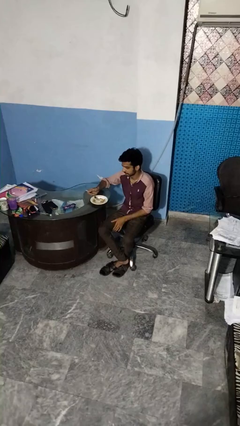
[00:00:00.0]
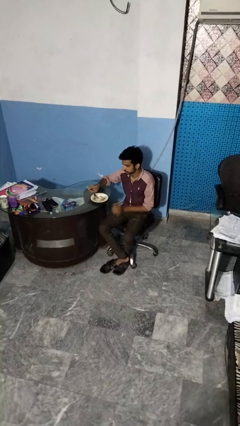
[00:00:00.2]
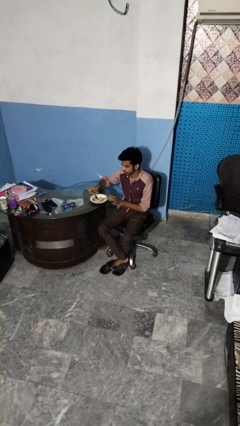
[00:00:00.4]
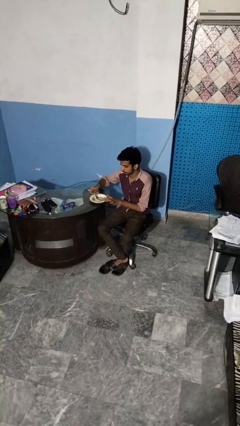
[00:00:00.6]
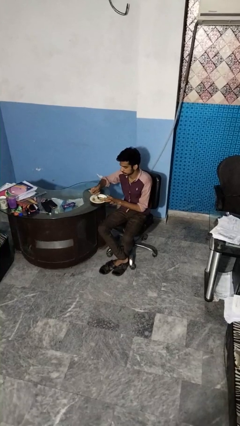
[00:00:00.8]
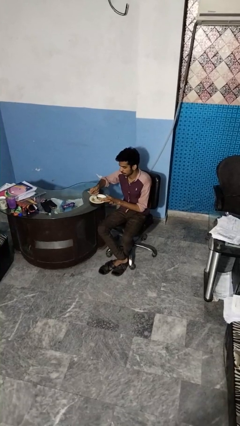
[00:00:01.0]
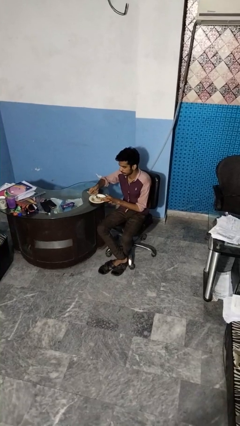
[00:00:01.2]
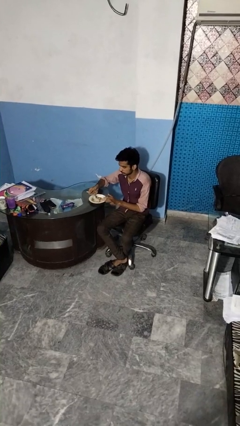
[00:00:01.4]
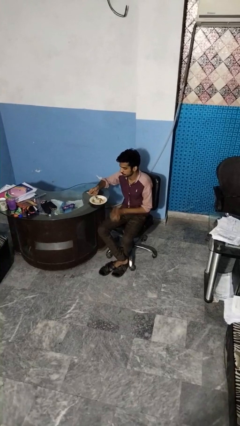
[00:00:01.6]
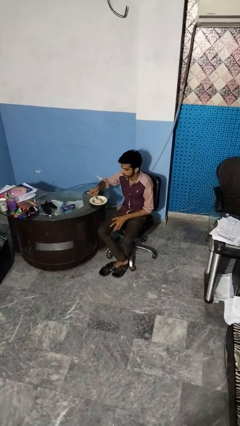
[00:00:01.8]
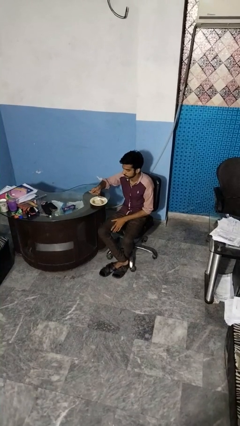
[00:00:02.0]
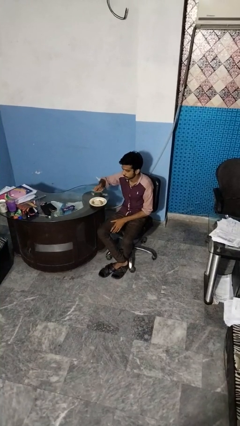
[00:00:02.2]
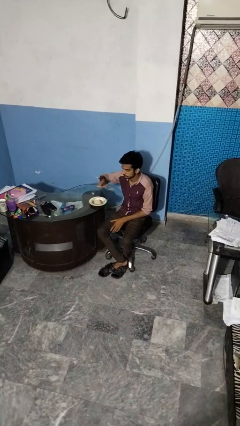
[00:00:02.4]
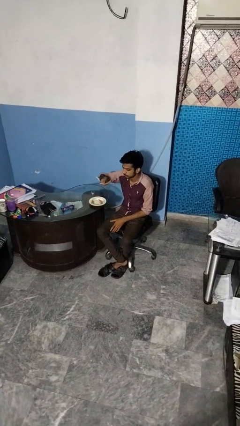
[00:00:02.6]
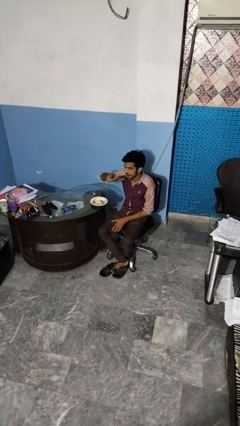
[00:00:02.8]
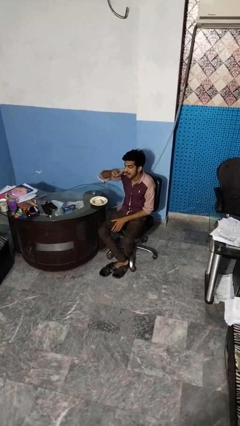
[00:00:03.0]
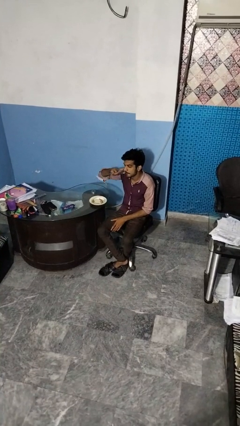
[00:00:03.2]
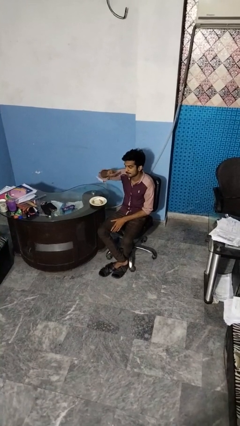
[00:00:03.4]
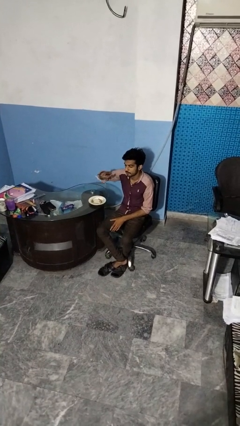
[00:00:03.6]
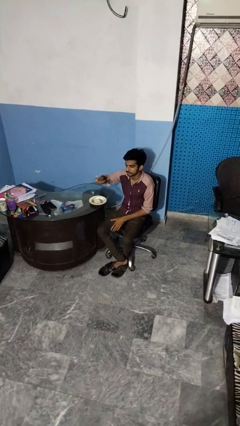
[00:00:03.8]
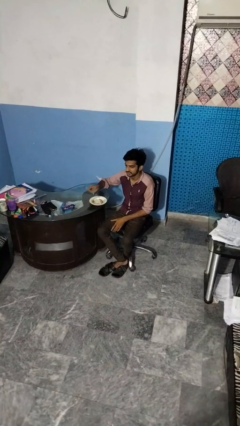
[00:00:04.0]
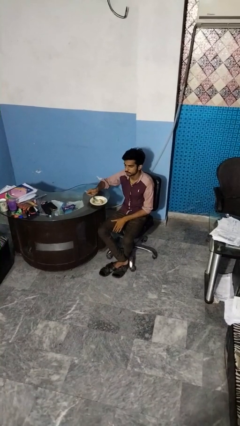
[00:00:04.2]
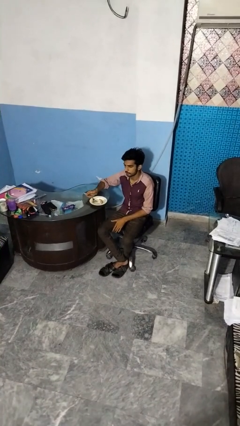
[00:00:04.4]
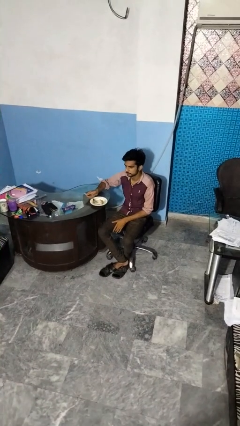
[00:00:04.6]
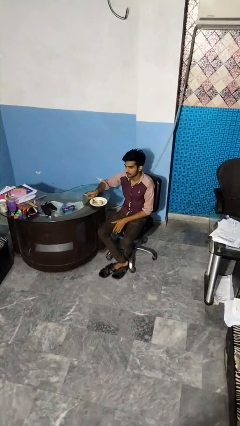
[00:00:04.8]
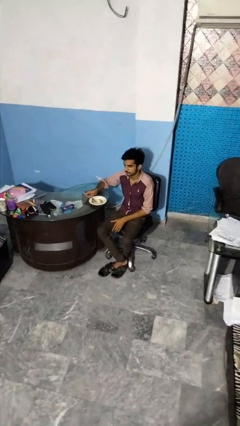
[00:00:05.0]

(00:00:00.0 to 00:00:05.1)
person eats with utensil

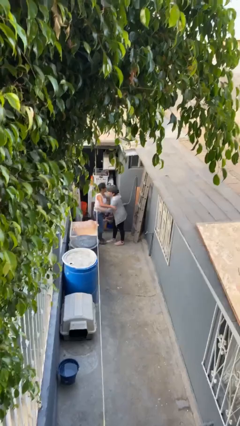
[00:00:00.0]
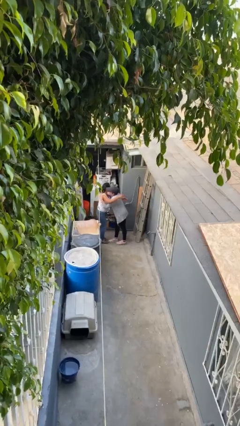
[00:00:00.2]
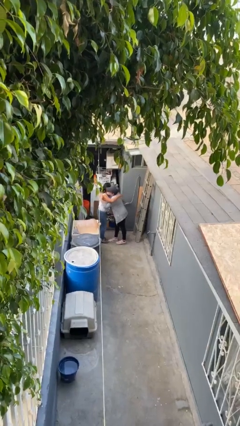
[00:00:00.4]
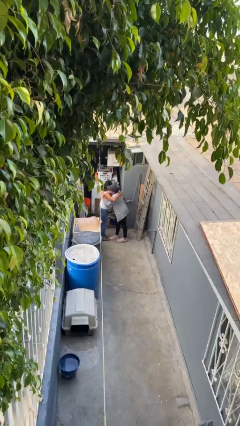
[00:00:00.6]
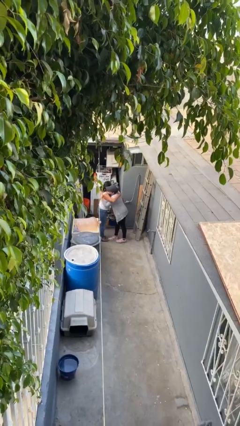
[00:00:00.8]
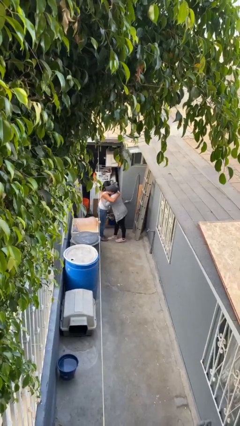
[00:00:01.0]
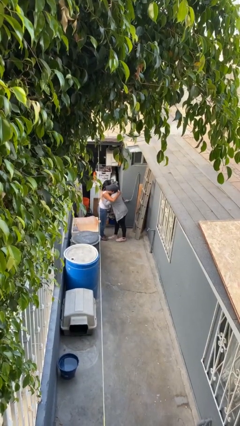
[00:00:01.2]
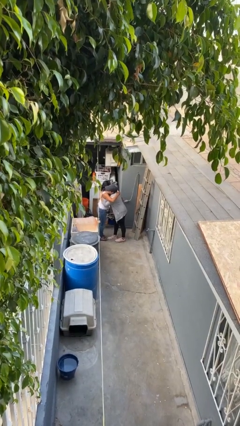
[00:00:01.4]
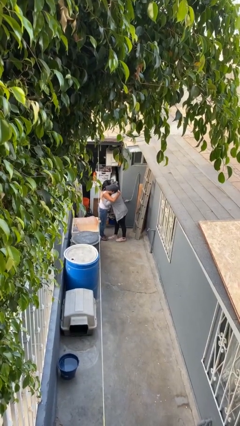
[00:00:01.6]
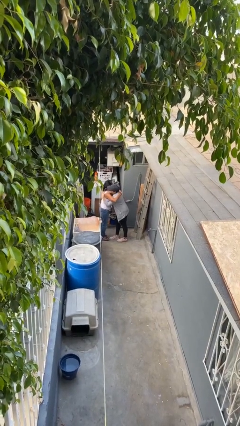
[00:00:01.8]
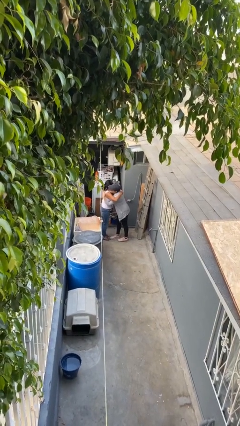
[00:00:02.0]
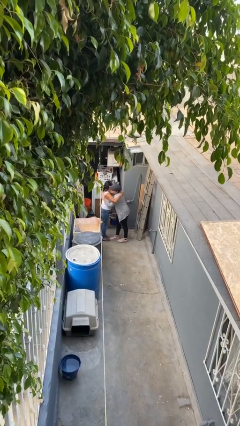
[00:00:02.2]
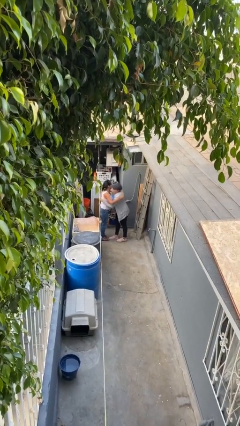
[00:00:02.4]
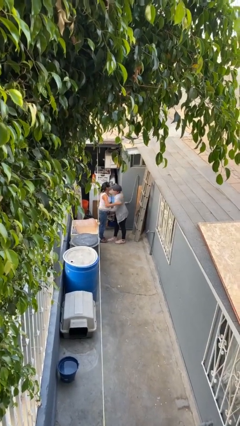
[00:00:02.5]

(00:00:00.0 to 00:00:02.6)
person embraces person

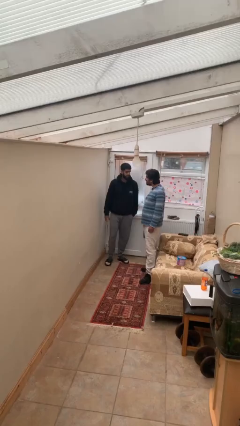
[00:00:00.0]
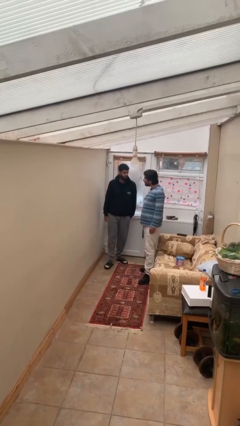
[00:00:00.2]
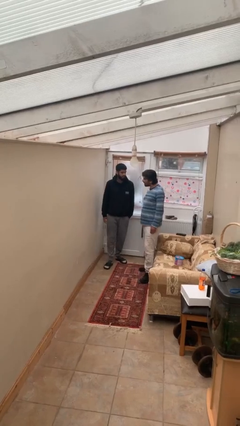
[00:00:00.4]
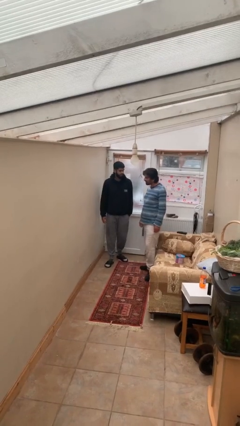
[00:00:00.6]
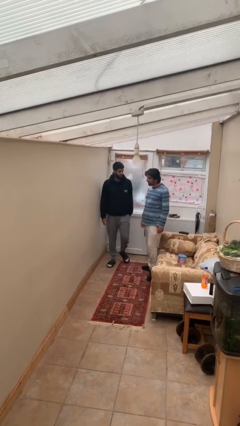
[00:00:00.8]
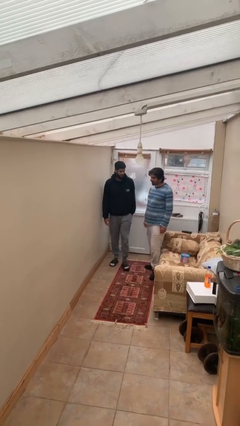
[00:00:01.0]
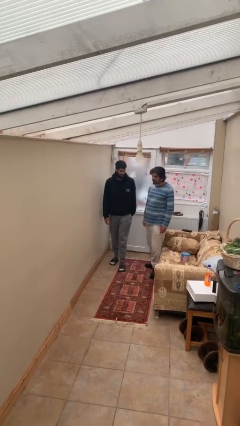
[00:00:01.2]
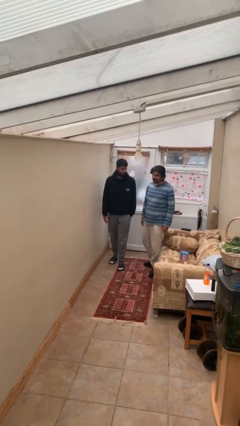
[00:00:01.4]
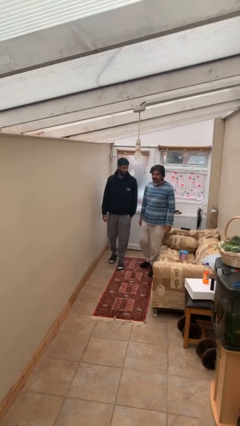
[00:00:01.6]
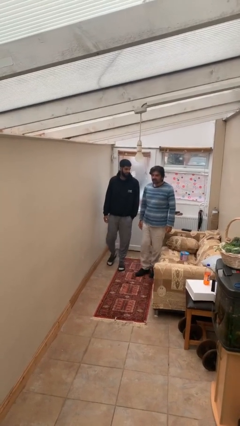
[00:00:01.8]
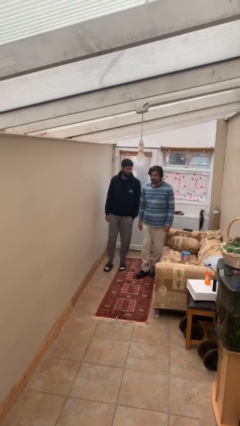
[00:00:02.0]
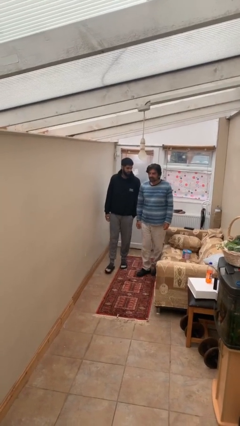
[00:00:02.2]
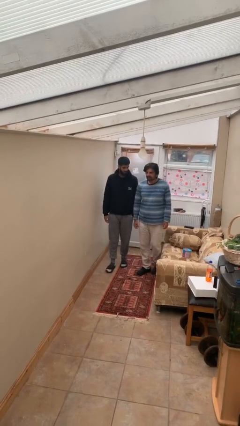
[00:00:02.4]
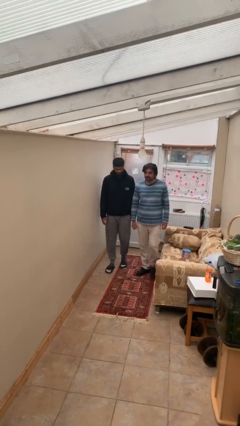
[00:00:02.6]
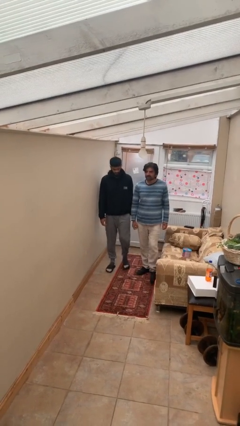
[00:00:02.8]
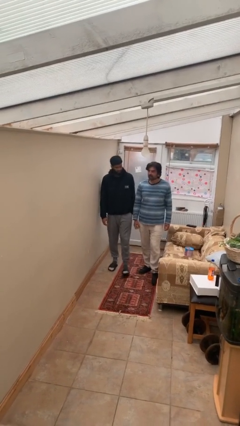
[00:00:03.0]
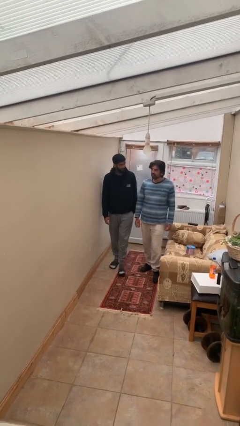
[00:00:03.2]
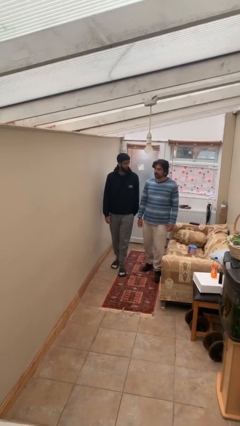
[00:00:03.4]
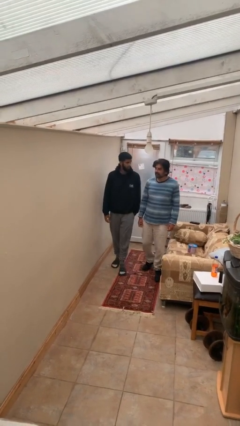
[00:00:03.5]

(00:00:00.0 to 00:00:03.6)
person talks to person

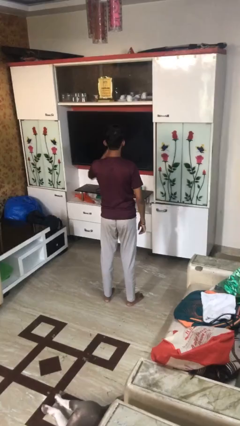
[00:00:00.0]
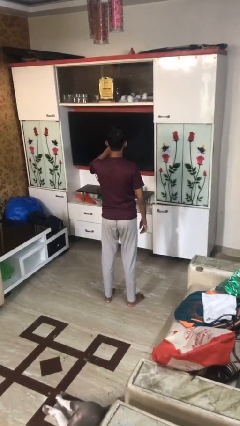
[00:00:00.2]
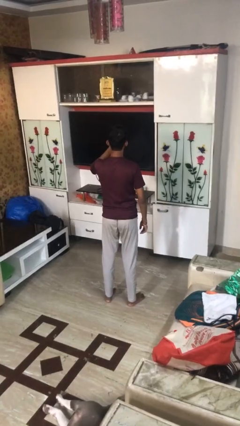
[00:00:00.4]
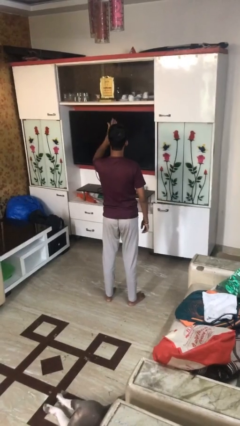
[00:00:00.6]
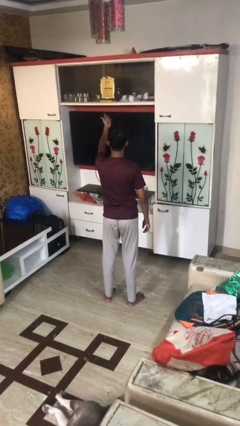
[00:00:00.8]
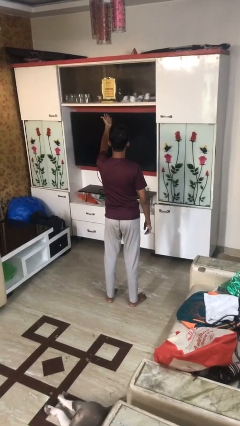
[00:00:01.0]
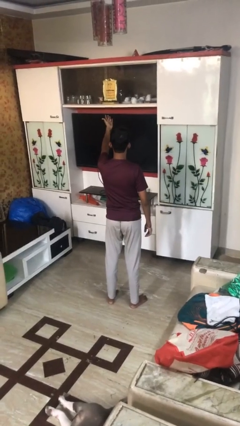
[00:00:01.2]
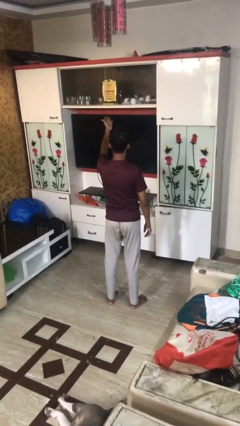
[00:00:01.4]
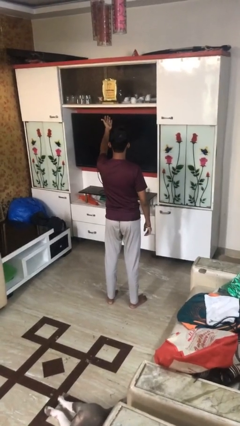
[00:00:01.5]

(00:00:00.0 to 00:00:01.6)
person gestures blow kiss

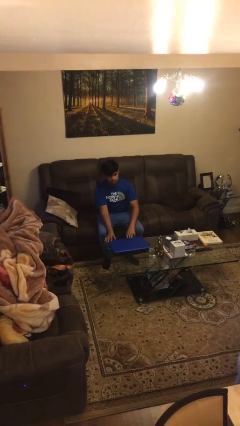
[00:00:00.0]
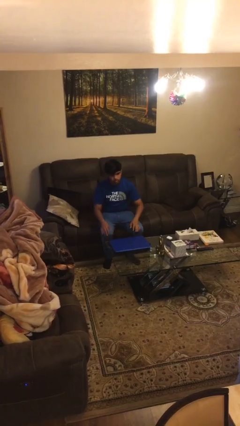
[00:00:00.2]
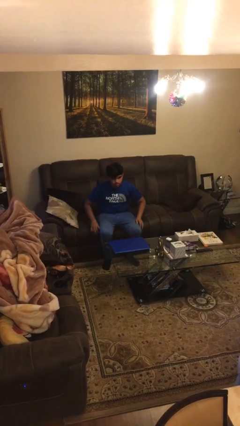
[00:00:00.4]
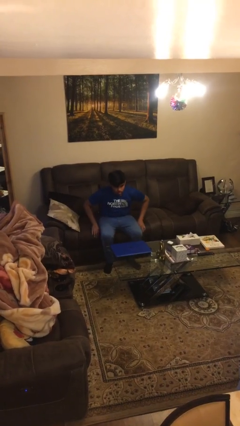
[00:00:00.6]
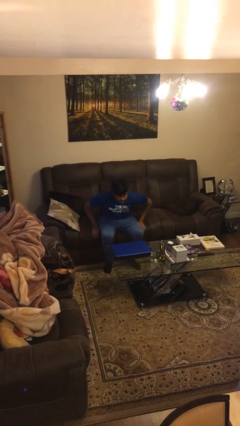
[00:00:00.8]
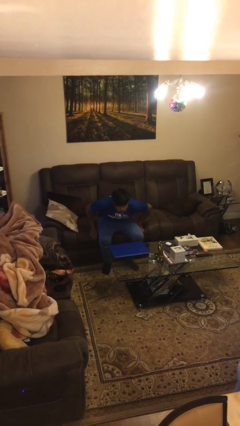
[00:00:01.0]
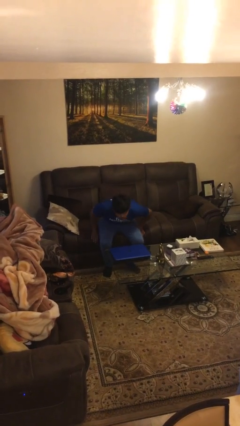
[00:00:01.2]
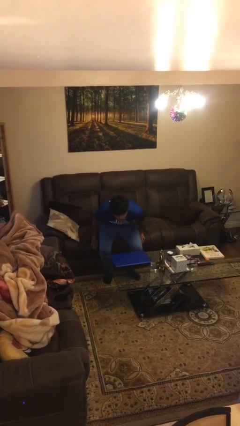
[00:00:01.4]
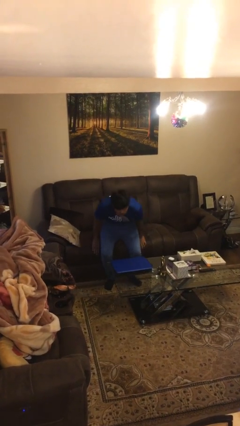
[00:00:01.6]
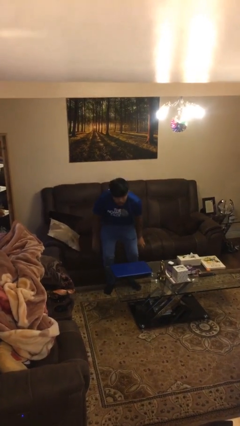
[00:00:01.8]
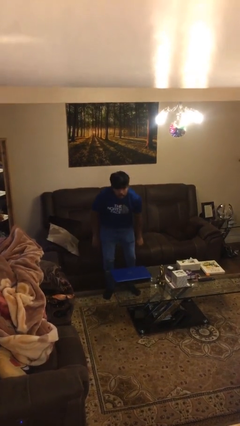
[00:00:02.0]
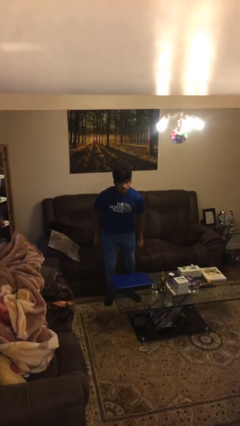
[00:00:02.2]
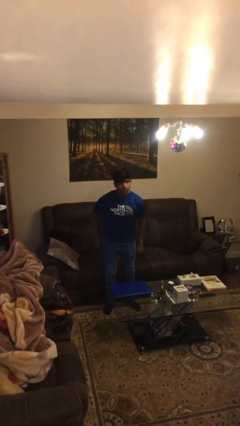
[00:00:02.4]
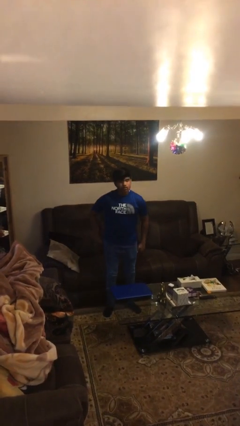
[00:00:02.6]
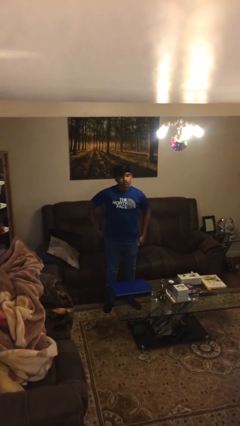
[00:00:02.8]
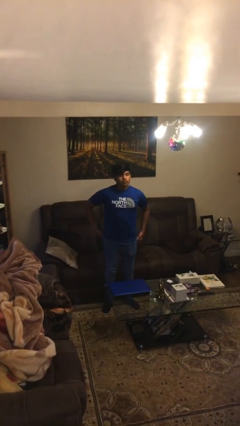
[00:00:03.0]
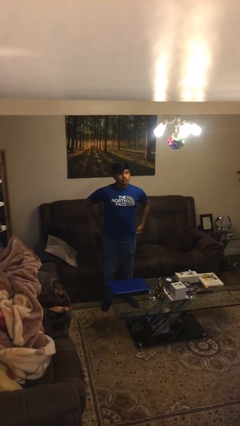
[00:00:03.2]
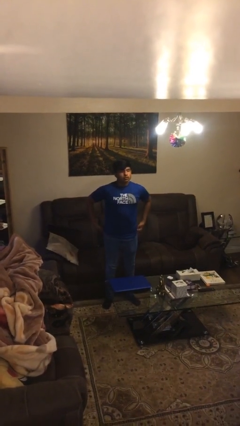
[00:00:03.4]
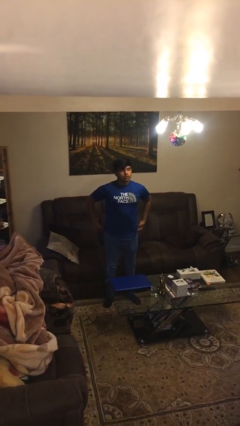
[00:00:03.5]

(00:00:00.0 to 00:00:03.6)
person stands up

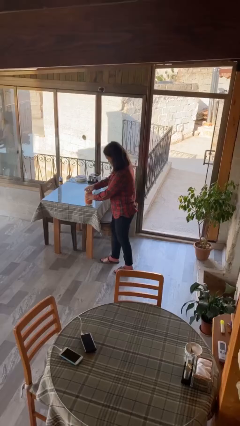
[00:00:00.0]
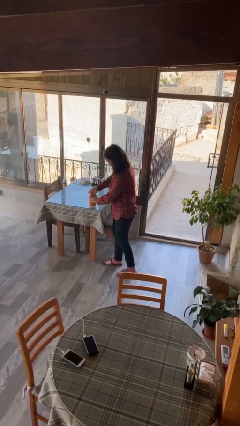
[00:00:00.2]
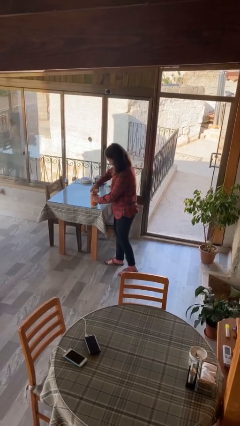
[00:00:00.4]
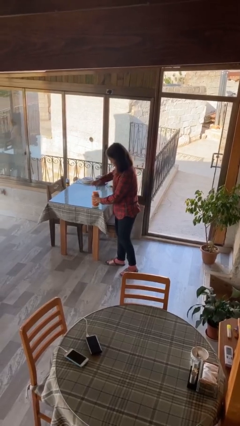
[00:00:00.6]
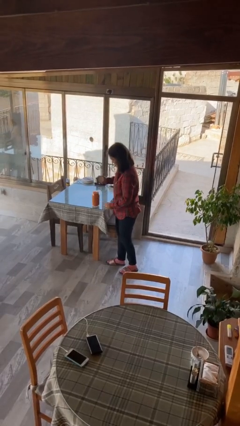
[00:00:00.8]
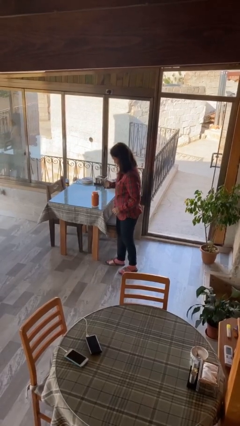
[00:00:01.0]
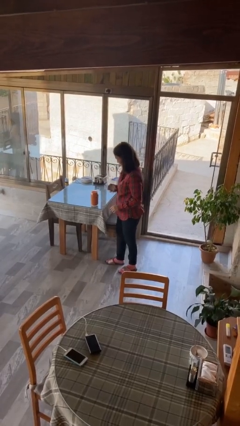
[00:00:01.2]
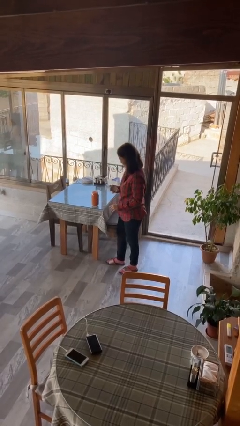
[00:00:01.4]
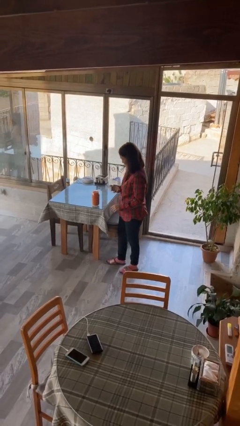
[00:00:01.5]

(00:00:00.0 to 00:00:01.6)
person opens jar
